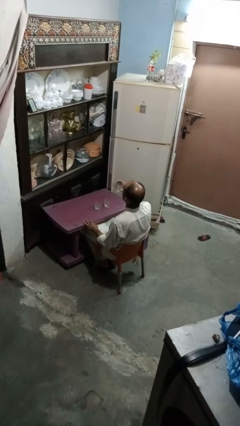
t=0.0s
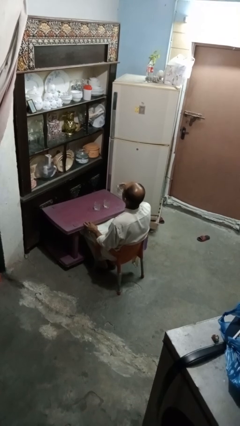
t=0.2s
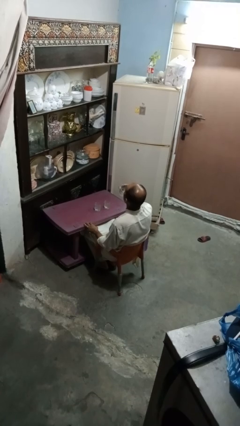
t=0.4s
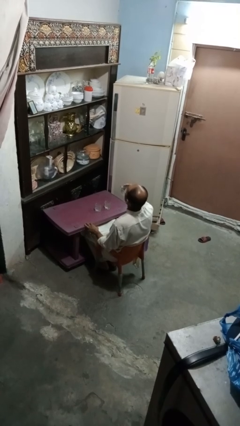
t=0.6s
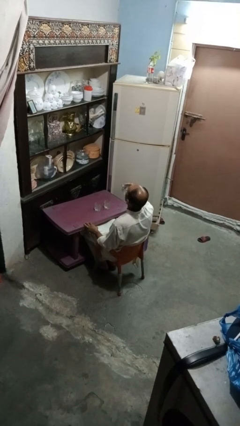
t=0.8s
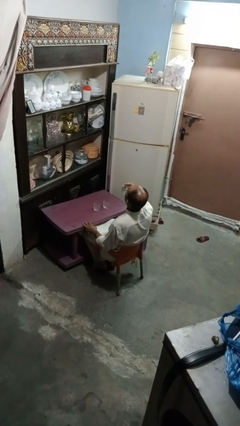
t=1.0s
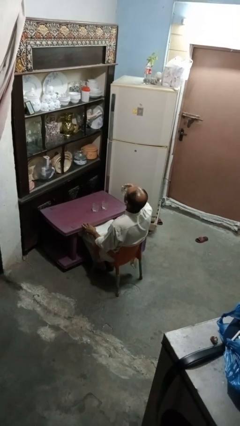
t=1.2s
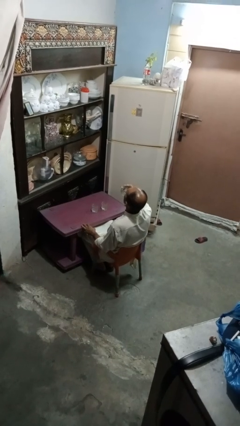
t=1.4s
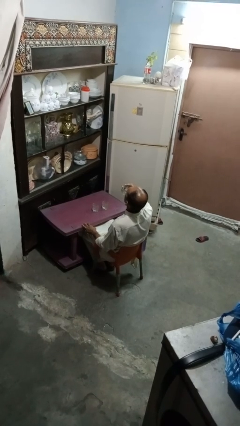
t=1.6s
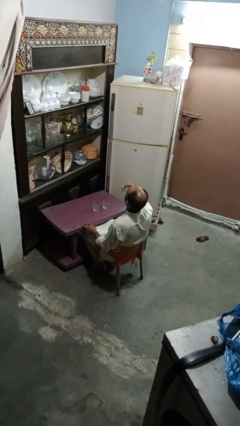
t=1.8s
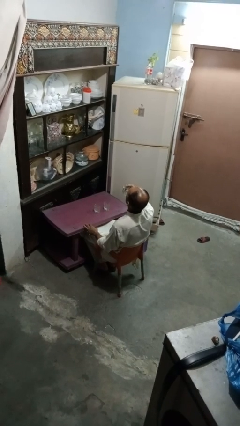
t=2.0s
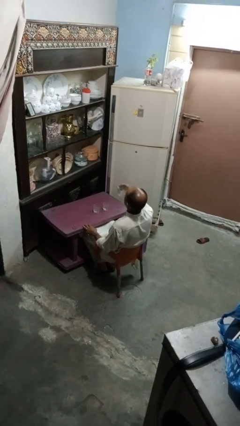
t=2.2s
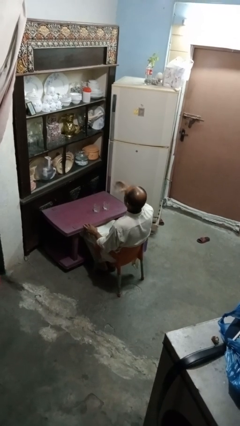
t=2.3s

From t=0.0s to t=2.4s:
person drinks from shotglass

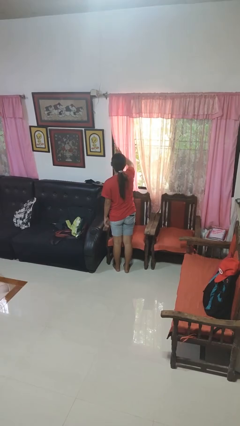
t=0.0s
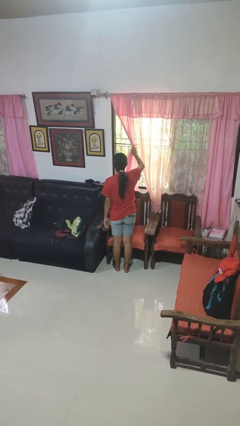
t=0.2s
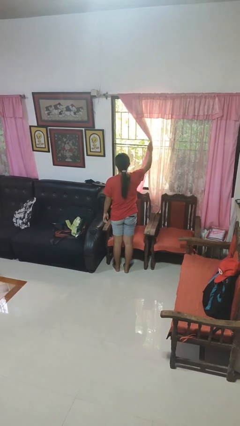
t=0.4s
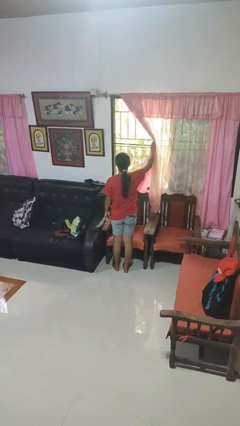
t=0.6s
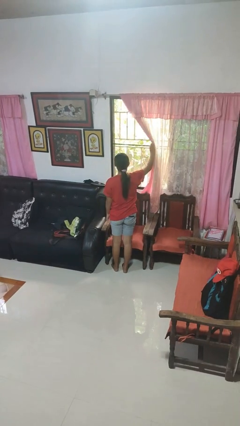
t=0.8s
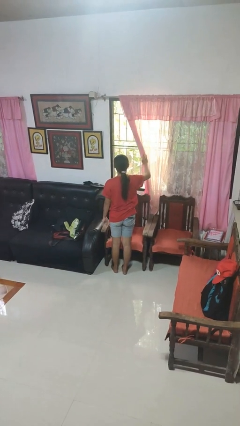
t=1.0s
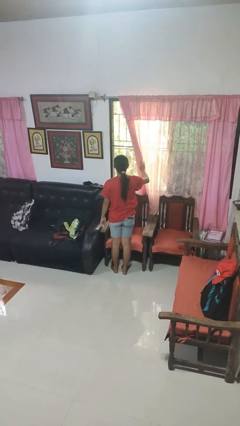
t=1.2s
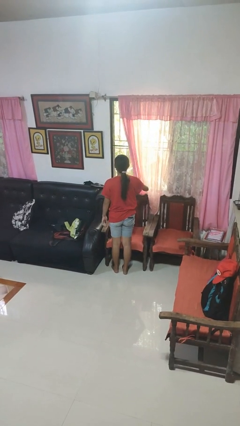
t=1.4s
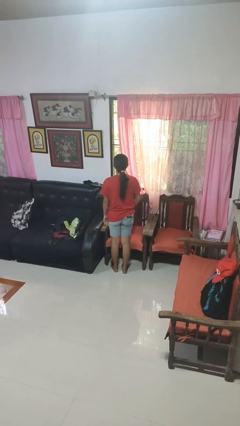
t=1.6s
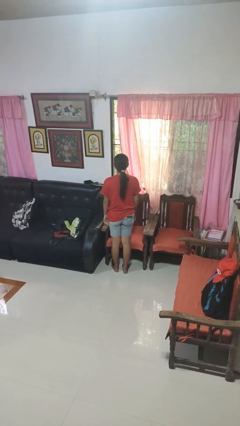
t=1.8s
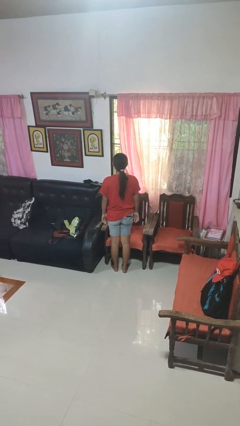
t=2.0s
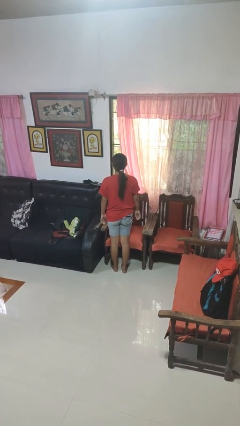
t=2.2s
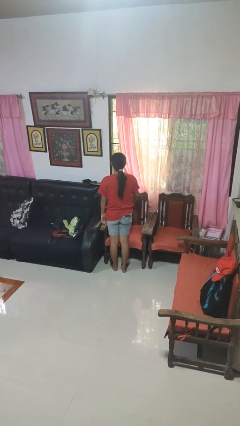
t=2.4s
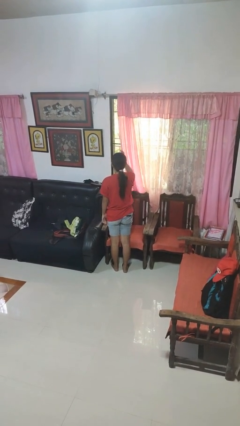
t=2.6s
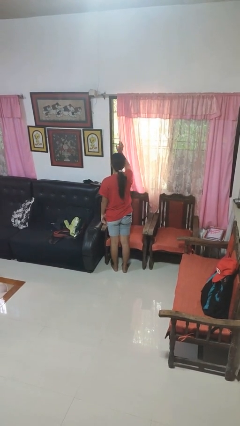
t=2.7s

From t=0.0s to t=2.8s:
person opens curtains

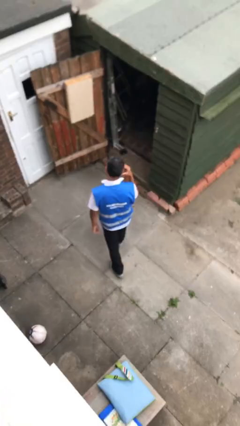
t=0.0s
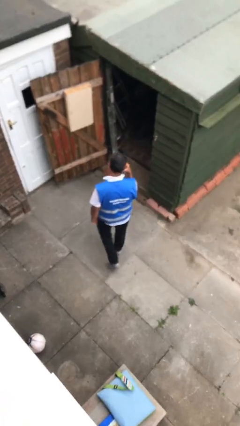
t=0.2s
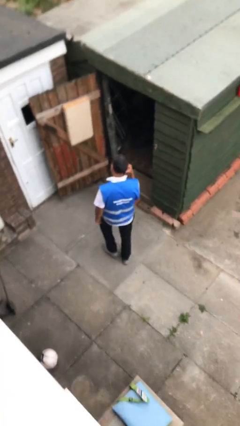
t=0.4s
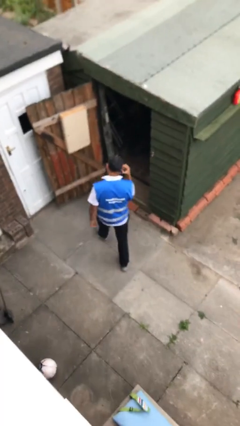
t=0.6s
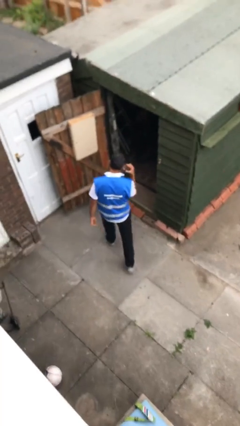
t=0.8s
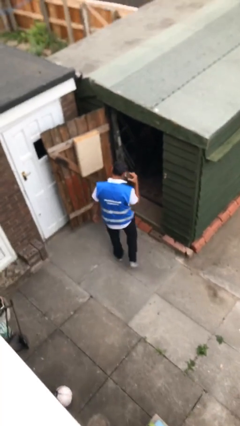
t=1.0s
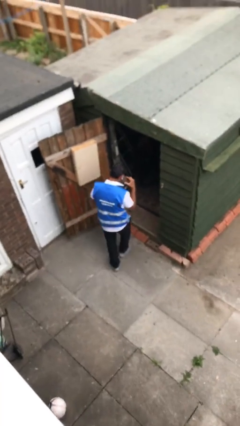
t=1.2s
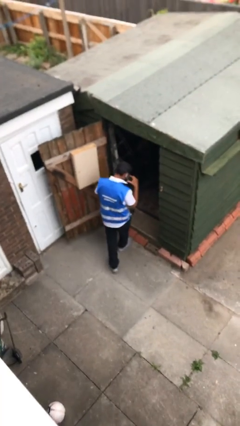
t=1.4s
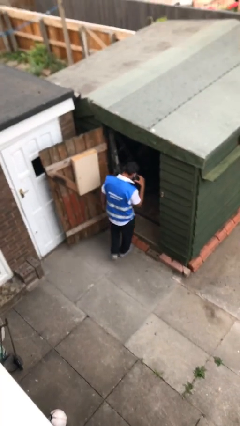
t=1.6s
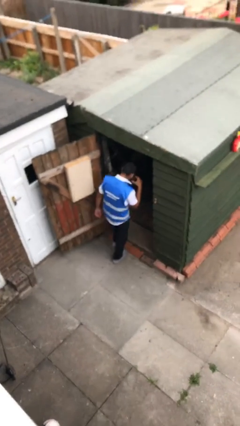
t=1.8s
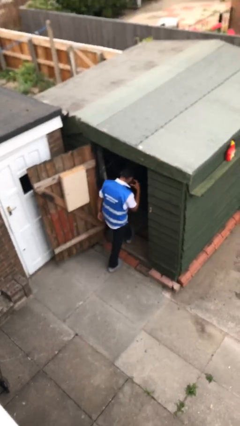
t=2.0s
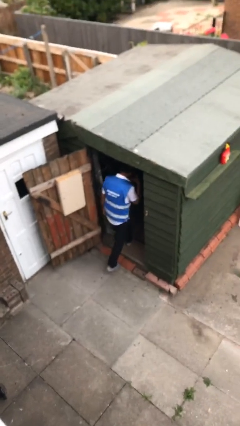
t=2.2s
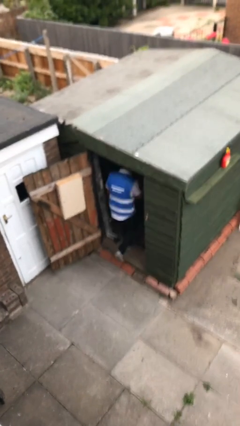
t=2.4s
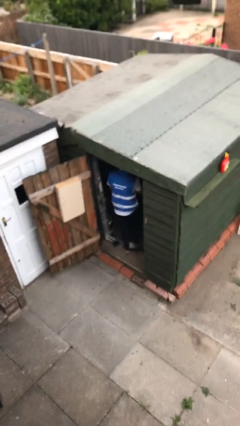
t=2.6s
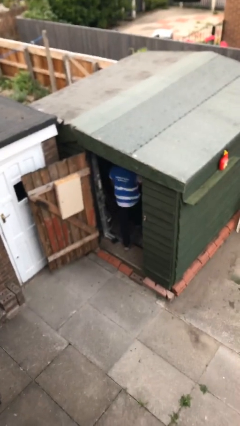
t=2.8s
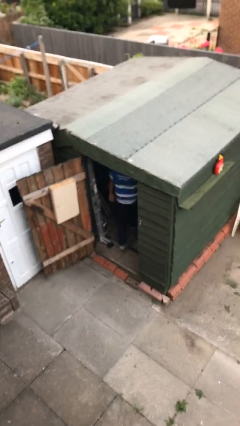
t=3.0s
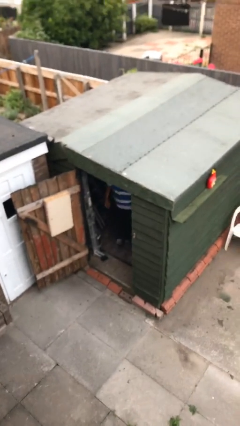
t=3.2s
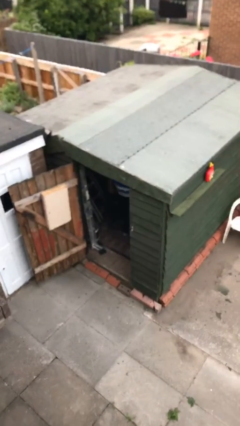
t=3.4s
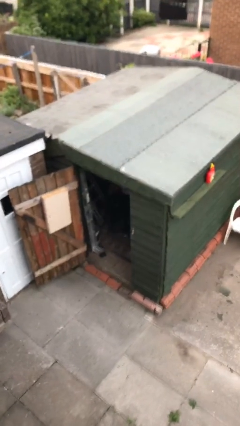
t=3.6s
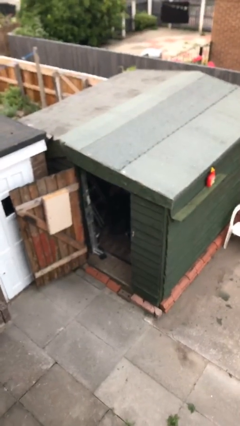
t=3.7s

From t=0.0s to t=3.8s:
person exits scene through structure

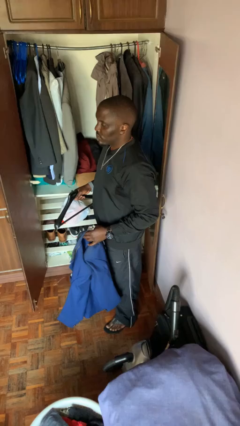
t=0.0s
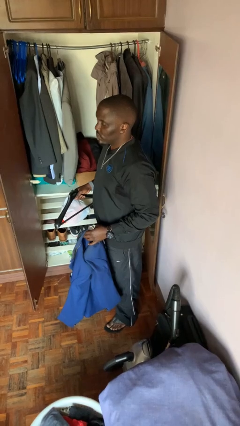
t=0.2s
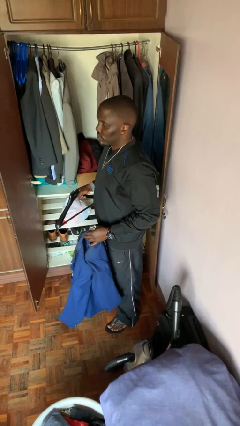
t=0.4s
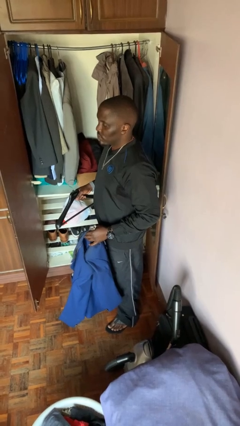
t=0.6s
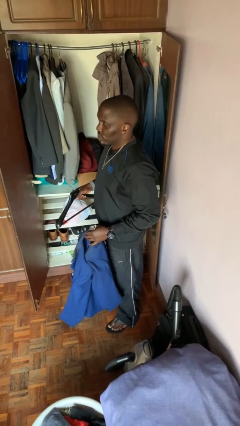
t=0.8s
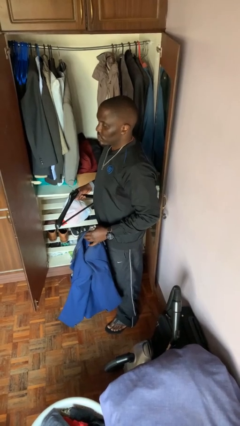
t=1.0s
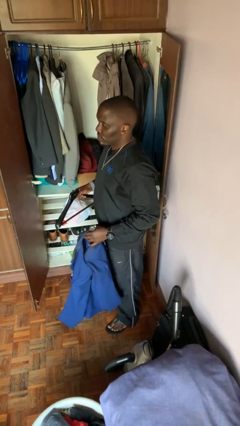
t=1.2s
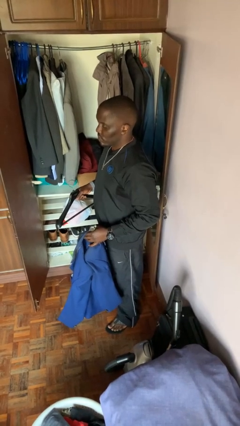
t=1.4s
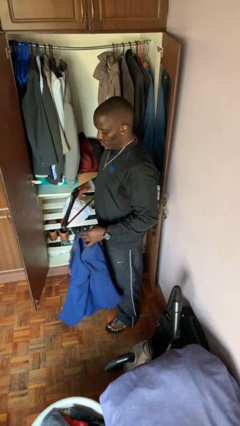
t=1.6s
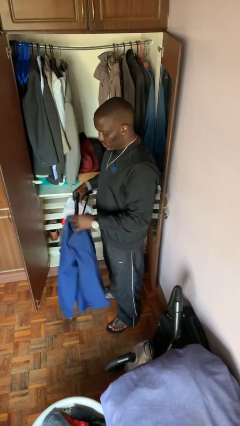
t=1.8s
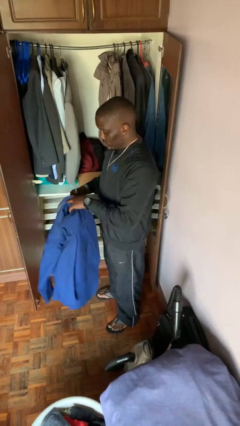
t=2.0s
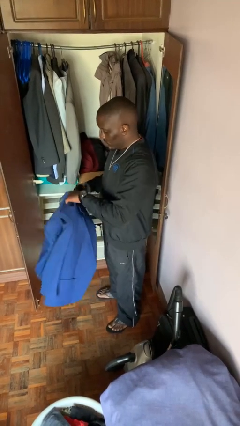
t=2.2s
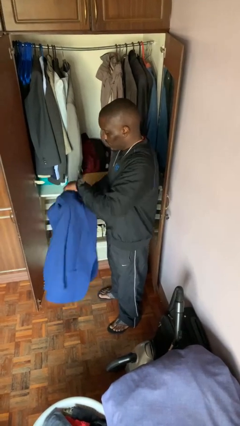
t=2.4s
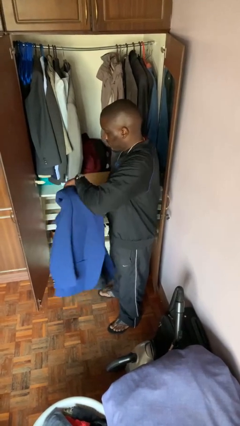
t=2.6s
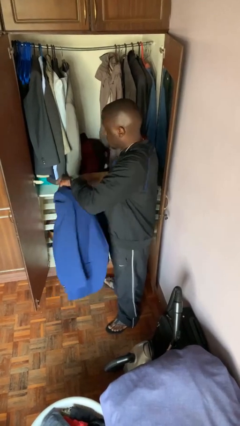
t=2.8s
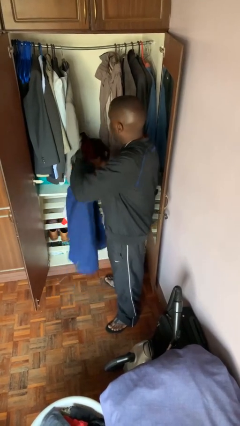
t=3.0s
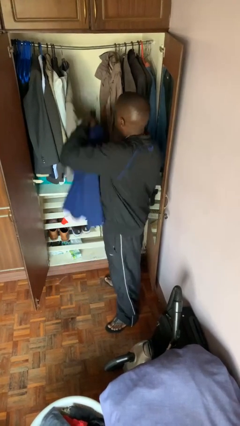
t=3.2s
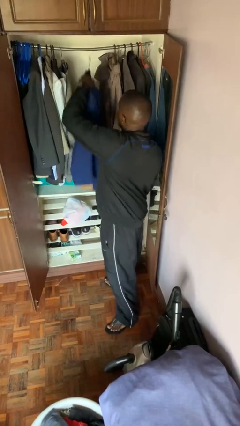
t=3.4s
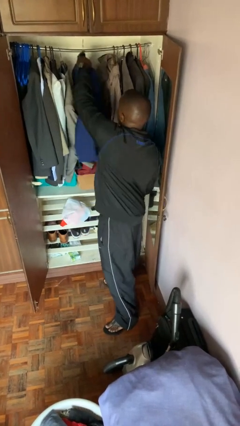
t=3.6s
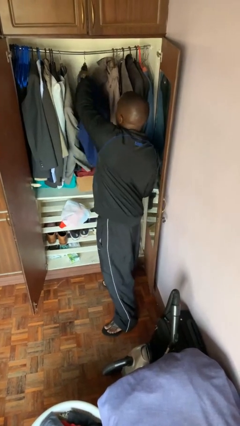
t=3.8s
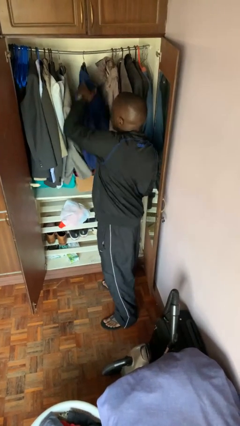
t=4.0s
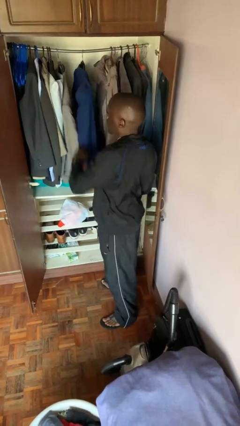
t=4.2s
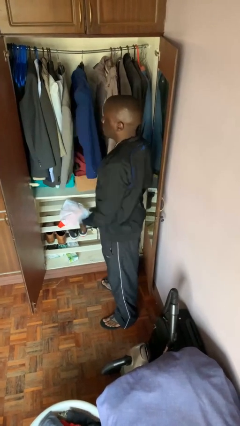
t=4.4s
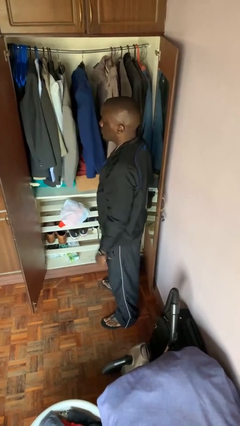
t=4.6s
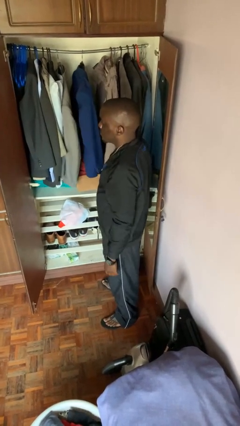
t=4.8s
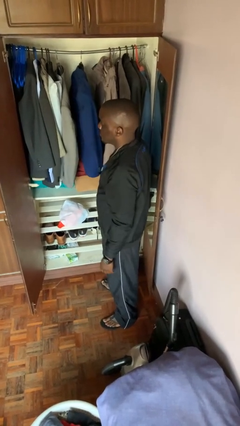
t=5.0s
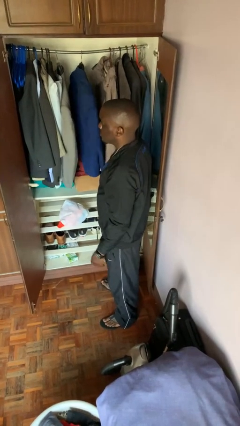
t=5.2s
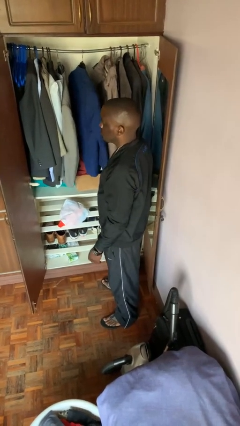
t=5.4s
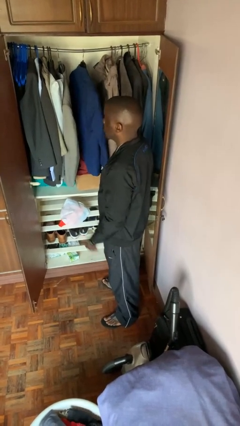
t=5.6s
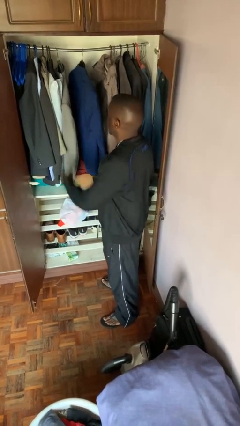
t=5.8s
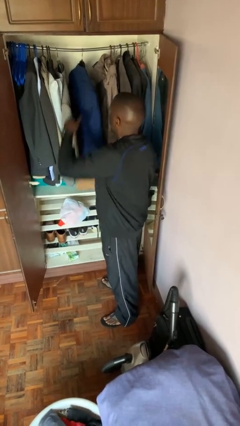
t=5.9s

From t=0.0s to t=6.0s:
person puts clothes into closet

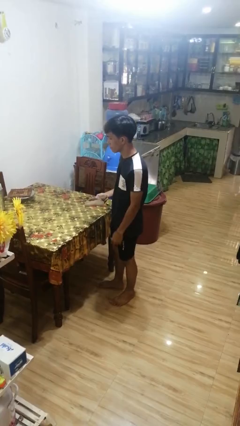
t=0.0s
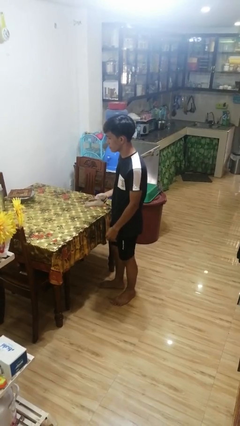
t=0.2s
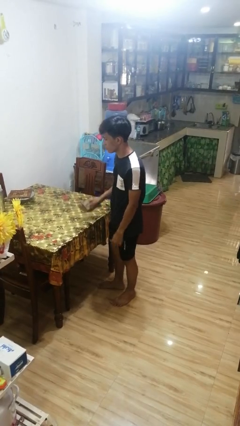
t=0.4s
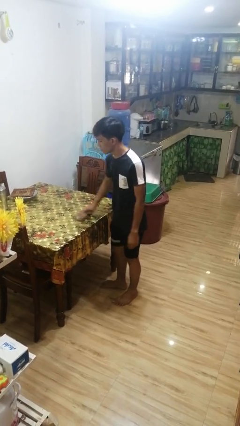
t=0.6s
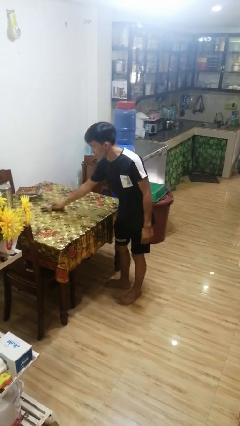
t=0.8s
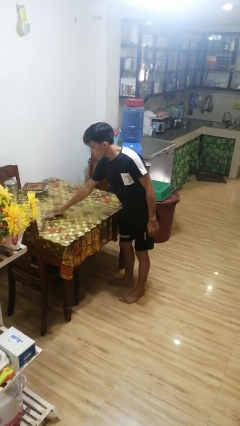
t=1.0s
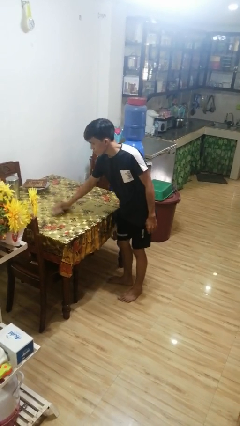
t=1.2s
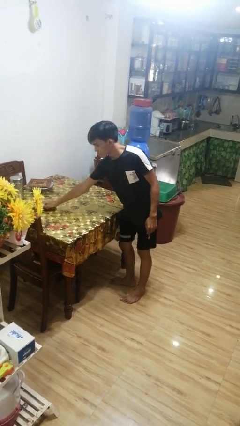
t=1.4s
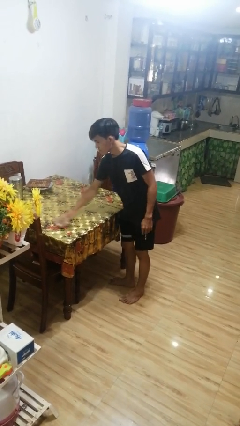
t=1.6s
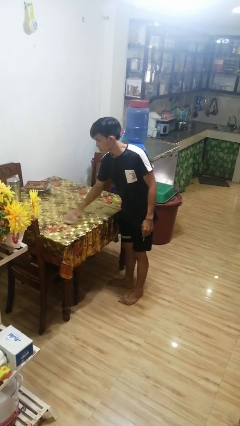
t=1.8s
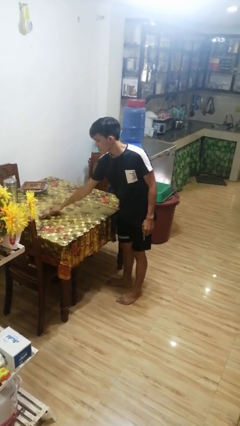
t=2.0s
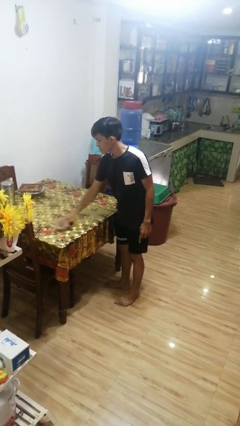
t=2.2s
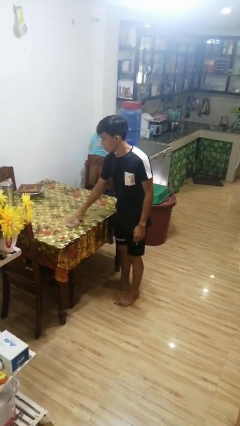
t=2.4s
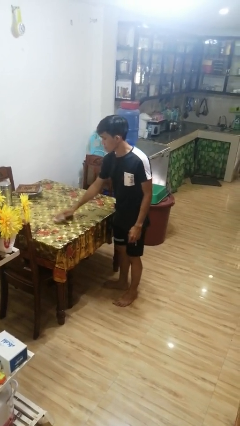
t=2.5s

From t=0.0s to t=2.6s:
person cleans table with rag
